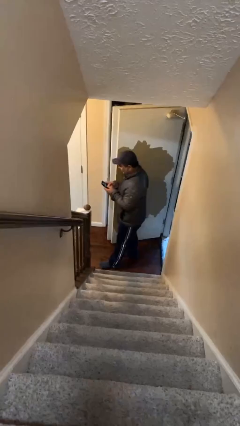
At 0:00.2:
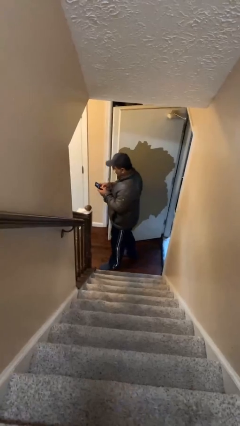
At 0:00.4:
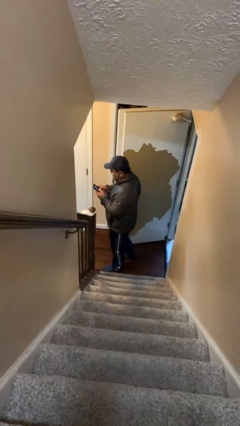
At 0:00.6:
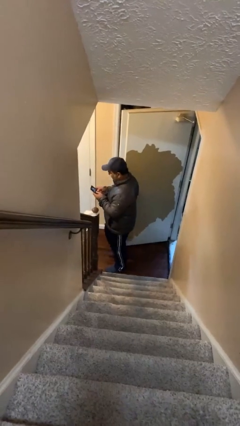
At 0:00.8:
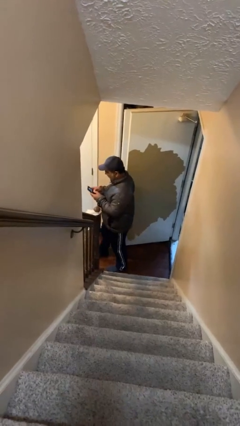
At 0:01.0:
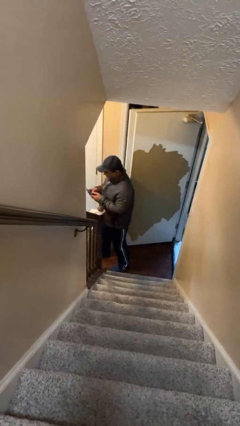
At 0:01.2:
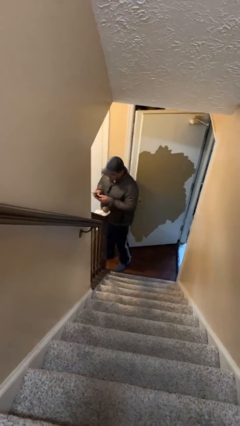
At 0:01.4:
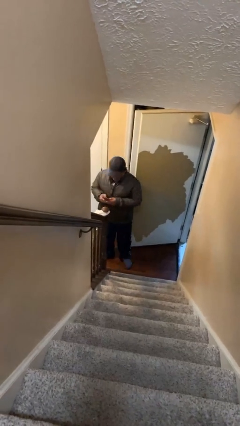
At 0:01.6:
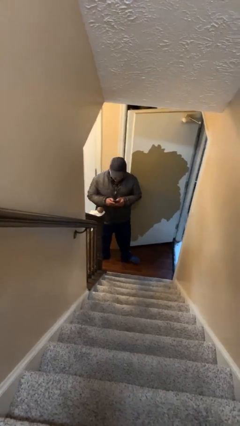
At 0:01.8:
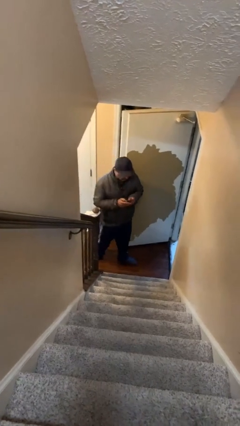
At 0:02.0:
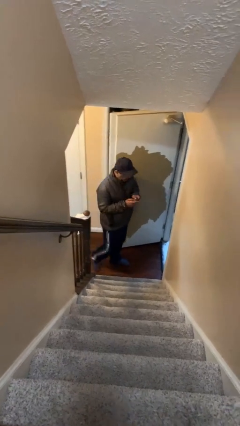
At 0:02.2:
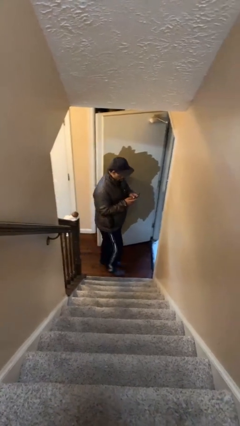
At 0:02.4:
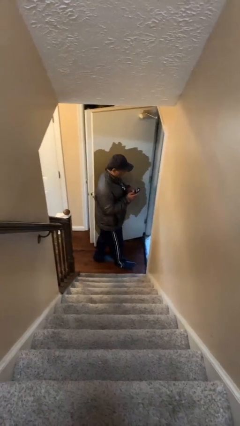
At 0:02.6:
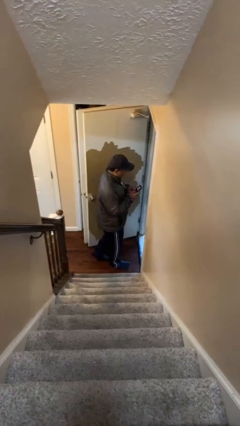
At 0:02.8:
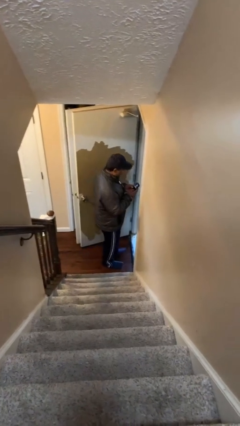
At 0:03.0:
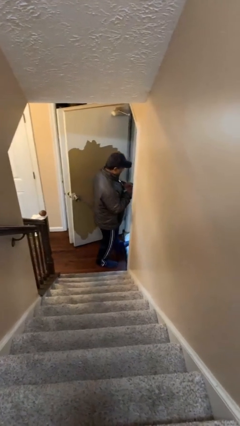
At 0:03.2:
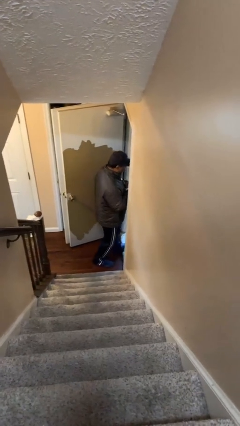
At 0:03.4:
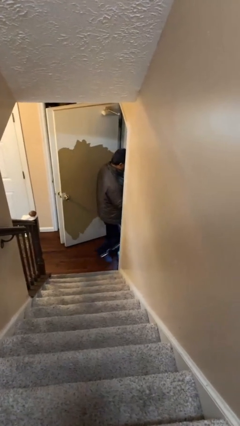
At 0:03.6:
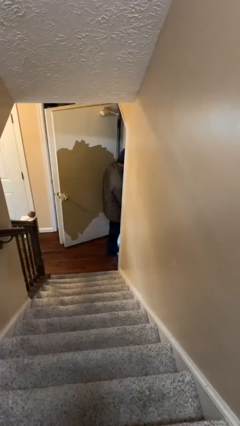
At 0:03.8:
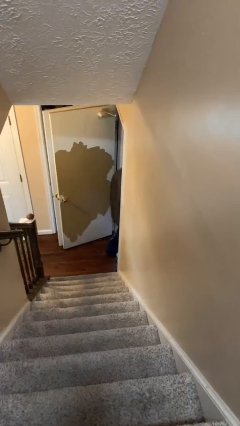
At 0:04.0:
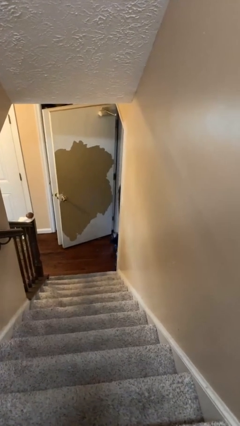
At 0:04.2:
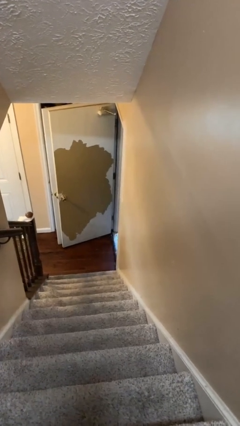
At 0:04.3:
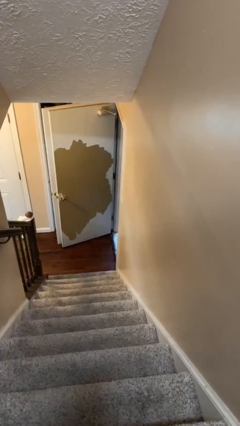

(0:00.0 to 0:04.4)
person exits scene through structure

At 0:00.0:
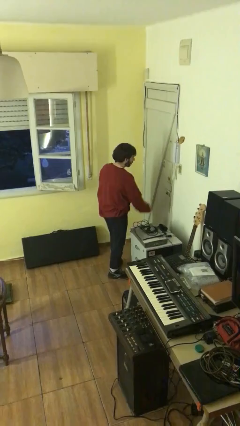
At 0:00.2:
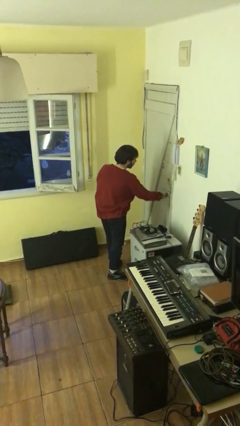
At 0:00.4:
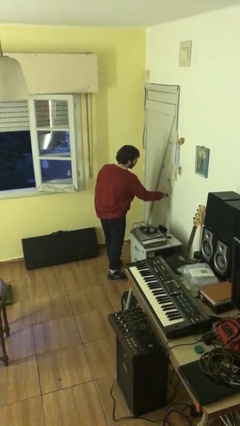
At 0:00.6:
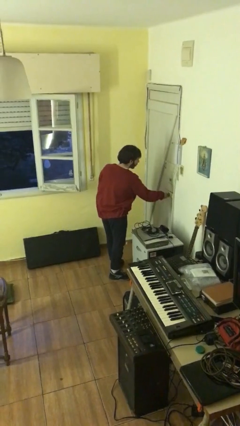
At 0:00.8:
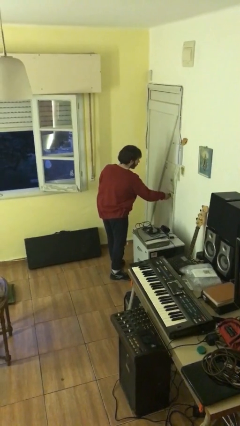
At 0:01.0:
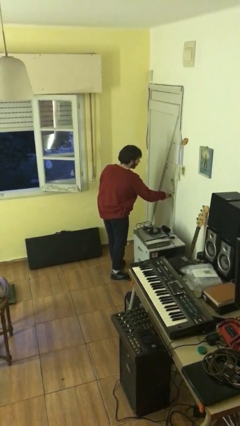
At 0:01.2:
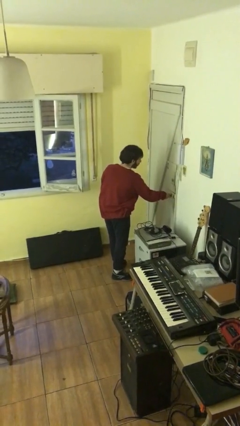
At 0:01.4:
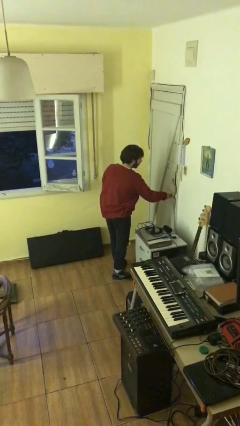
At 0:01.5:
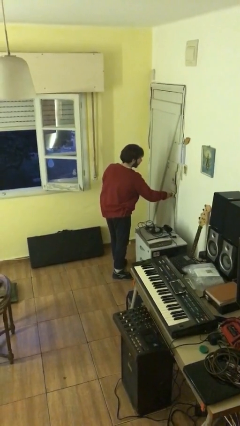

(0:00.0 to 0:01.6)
person unlocks door with keys

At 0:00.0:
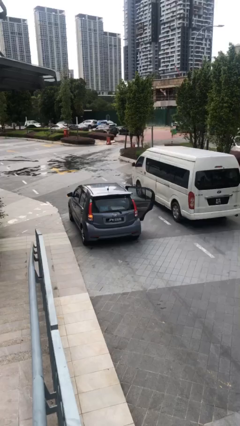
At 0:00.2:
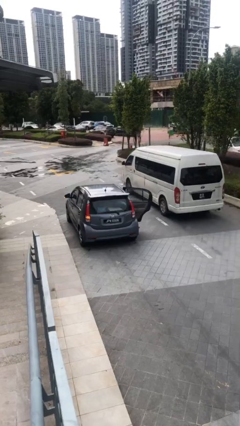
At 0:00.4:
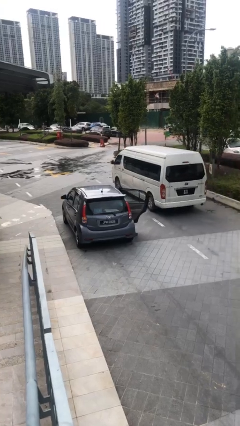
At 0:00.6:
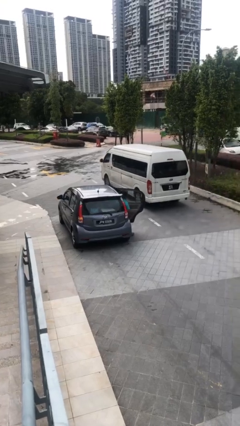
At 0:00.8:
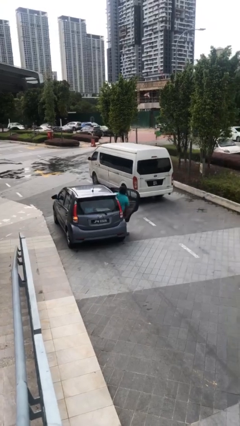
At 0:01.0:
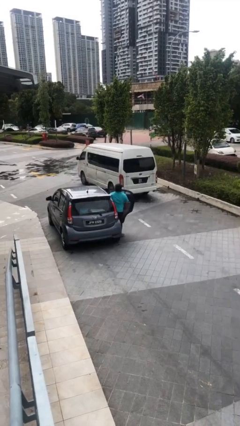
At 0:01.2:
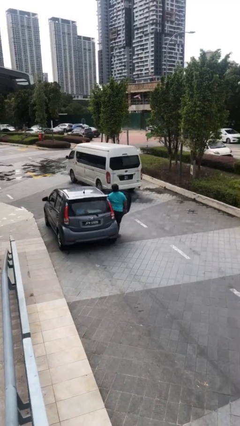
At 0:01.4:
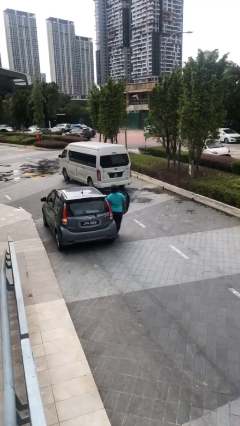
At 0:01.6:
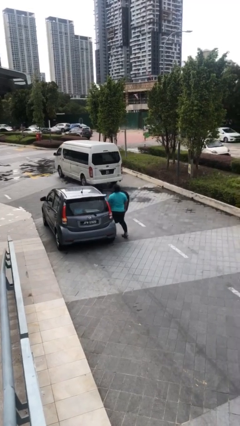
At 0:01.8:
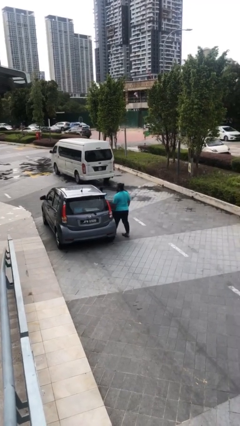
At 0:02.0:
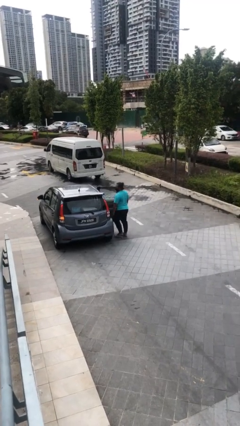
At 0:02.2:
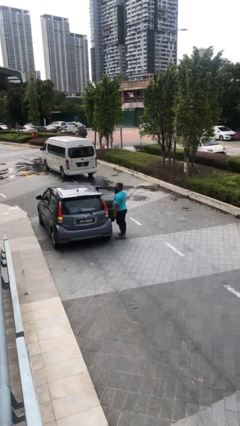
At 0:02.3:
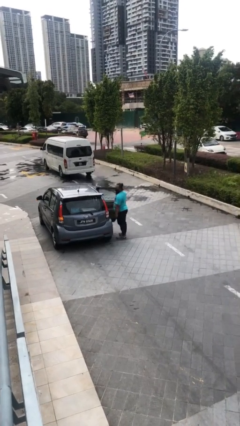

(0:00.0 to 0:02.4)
person exits car

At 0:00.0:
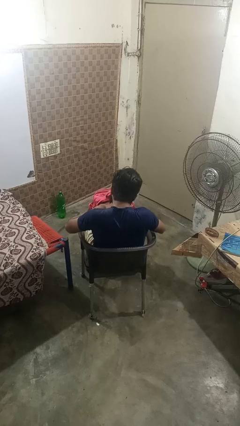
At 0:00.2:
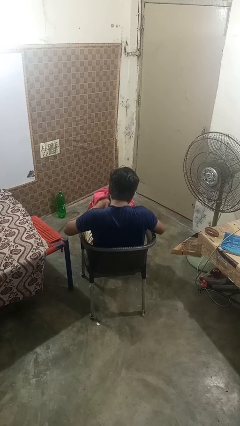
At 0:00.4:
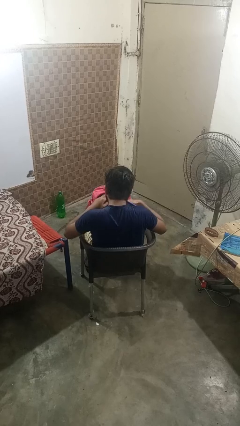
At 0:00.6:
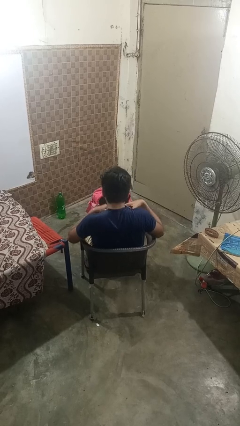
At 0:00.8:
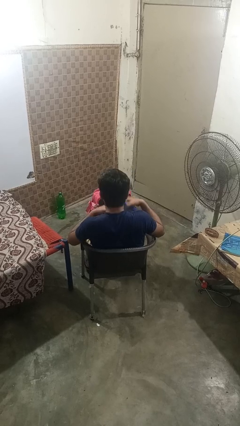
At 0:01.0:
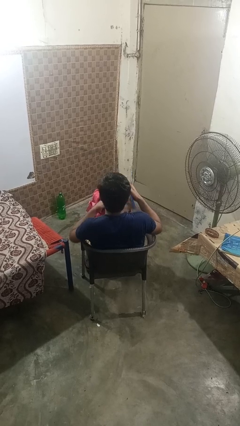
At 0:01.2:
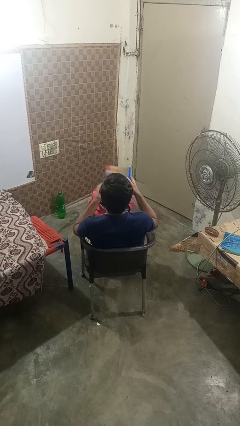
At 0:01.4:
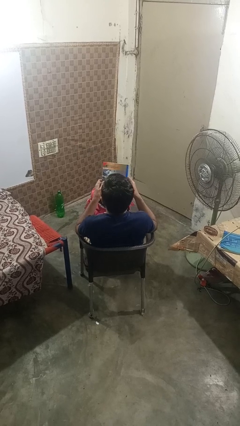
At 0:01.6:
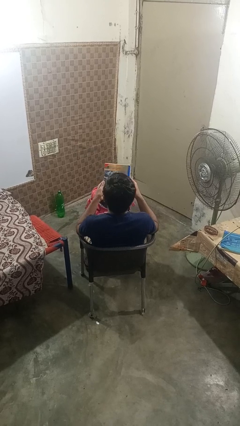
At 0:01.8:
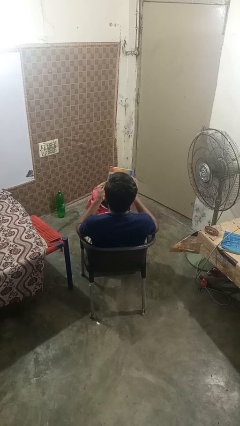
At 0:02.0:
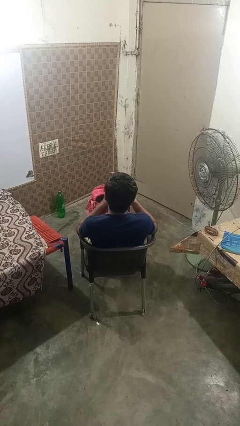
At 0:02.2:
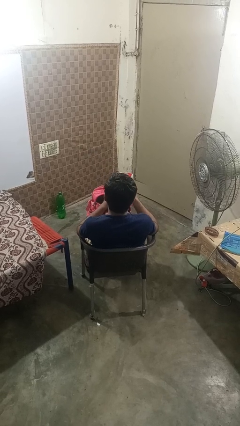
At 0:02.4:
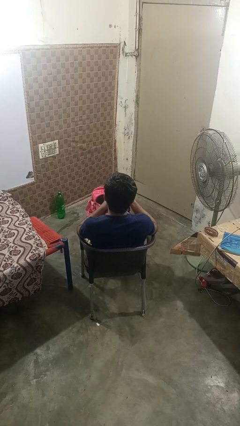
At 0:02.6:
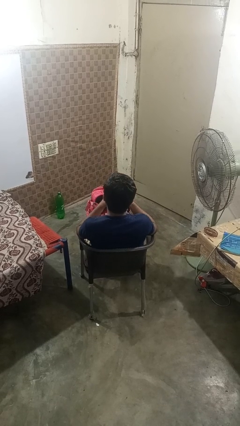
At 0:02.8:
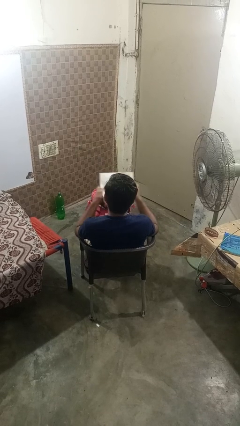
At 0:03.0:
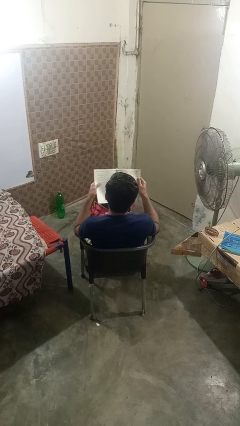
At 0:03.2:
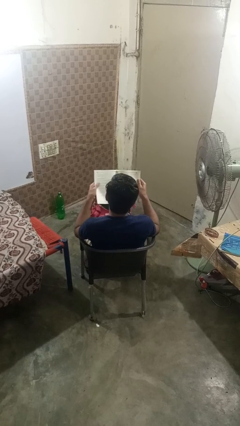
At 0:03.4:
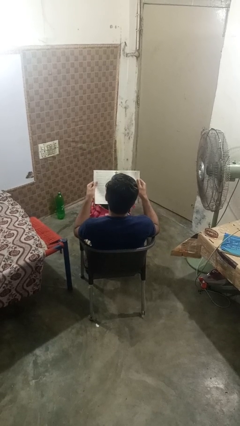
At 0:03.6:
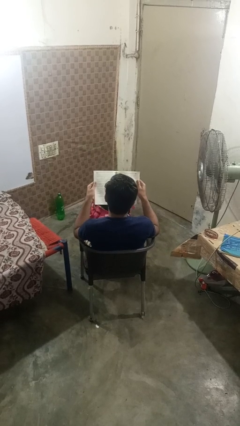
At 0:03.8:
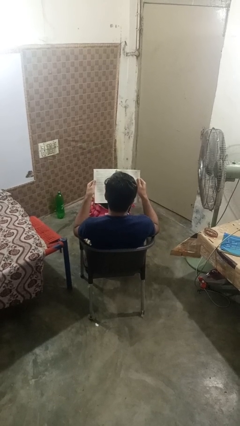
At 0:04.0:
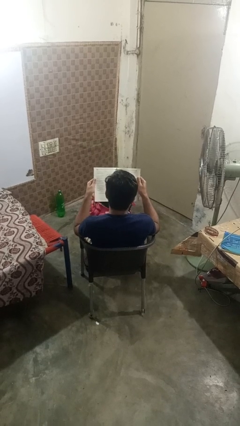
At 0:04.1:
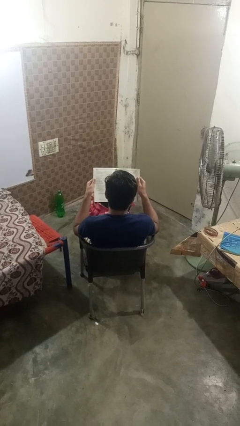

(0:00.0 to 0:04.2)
person takes object from backpack

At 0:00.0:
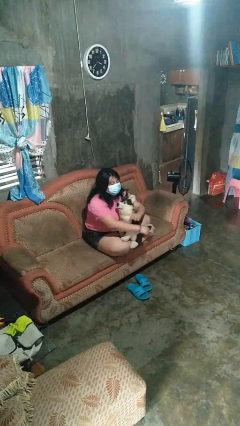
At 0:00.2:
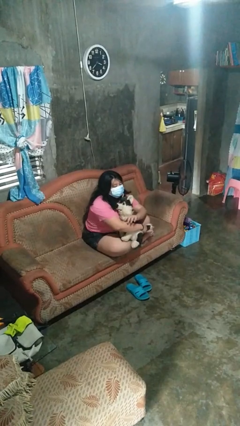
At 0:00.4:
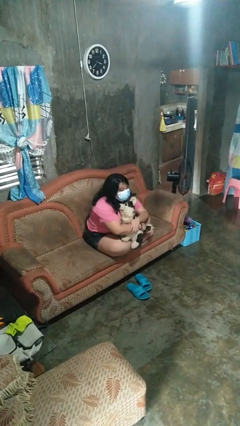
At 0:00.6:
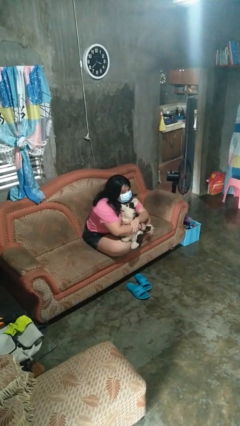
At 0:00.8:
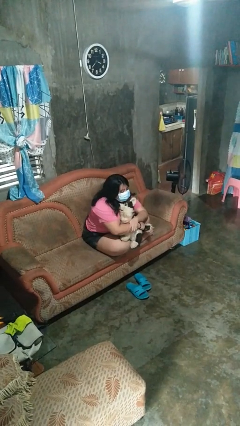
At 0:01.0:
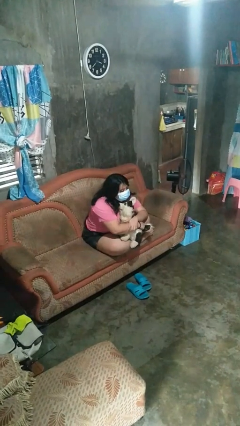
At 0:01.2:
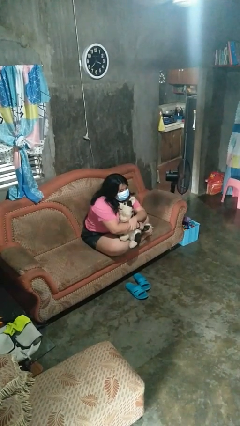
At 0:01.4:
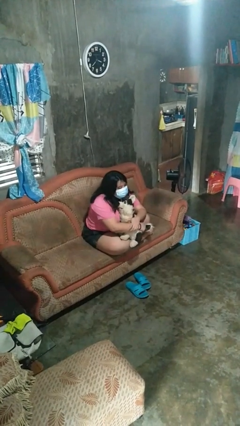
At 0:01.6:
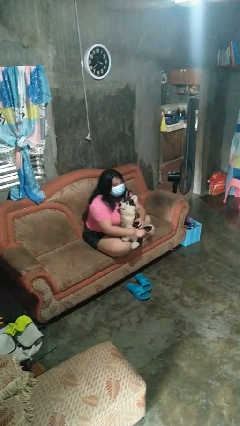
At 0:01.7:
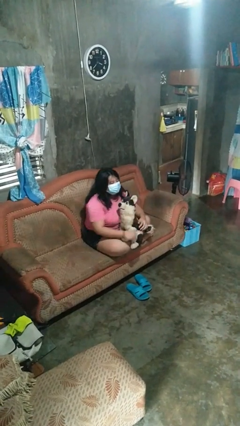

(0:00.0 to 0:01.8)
person hugs stuffed animal

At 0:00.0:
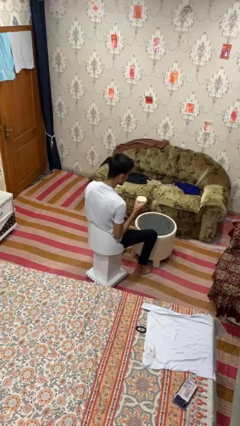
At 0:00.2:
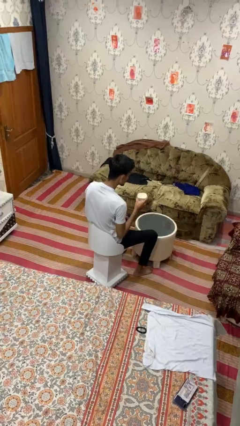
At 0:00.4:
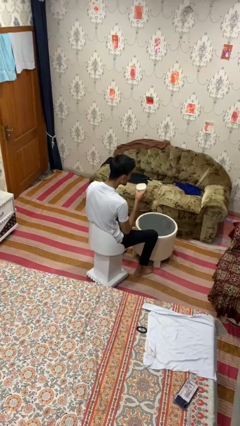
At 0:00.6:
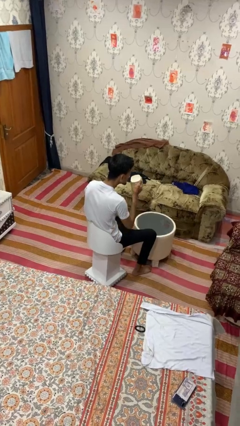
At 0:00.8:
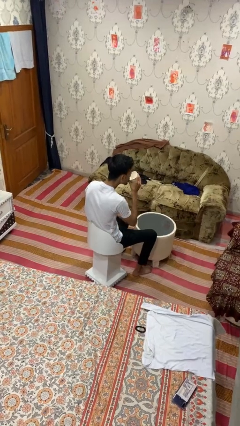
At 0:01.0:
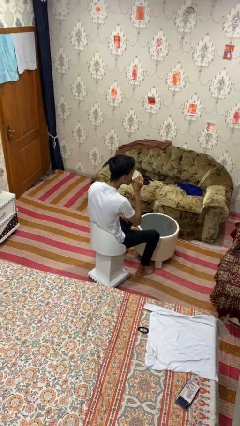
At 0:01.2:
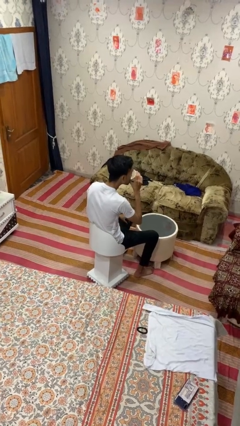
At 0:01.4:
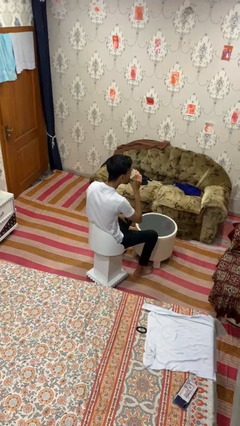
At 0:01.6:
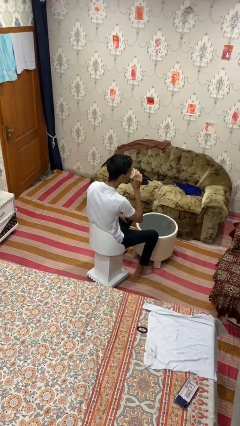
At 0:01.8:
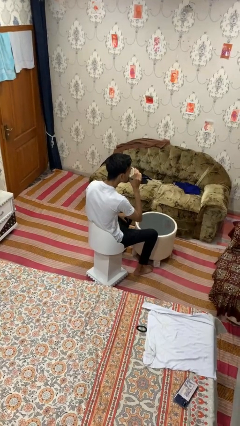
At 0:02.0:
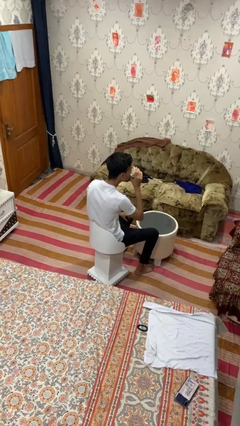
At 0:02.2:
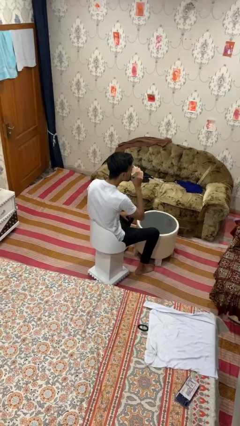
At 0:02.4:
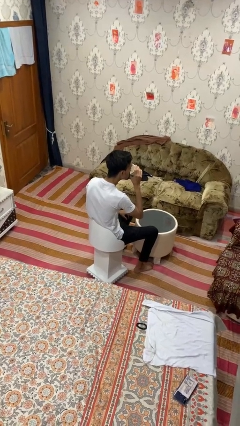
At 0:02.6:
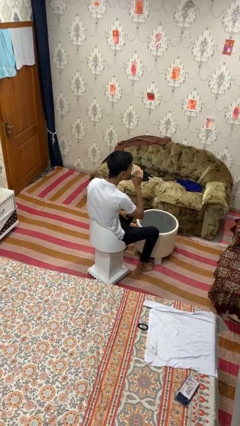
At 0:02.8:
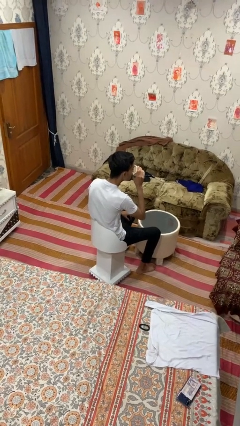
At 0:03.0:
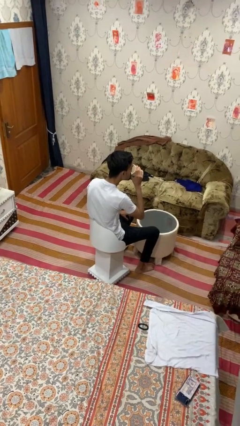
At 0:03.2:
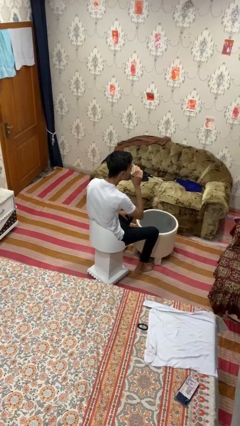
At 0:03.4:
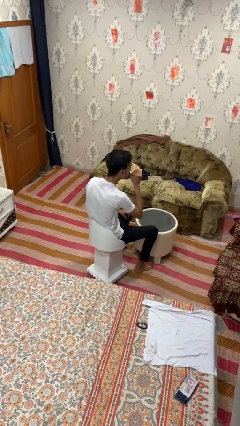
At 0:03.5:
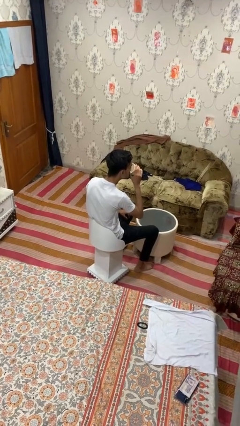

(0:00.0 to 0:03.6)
person drinks from mug
